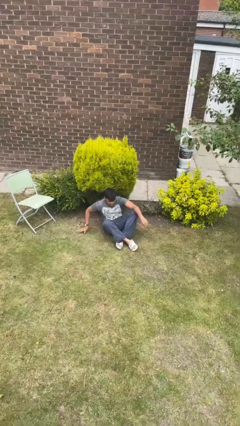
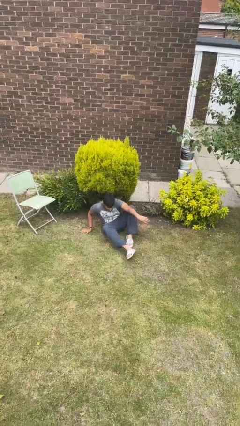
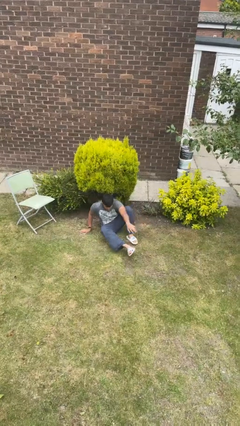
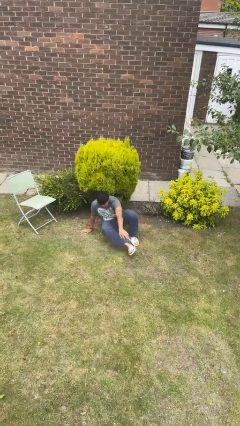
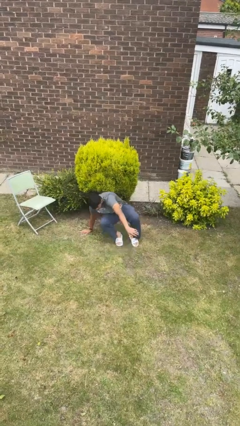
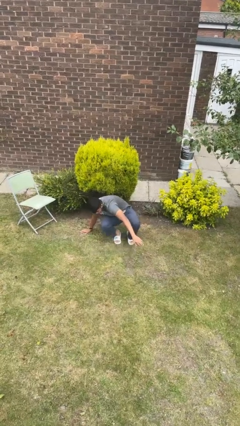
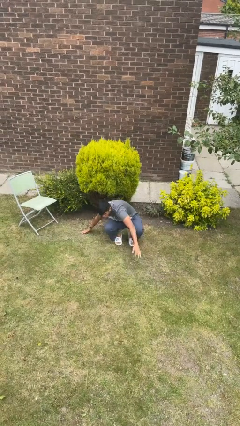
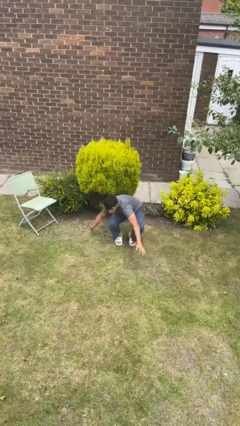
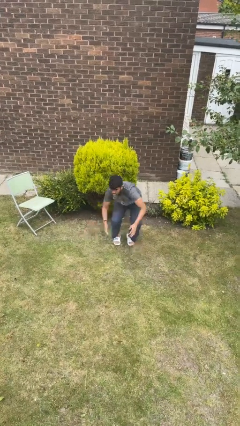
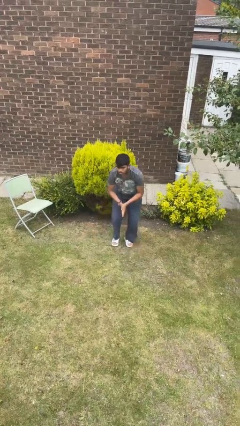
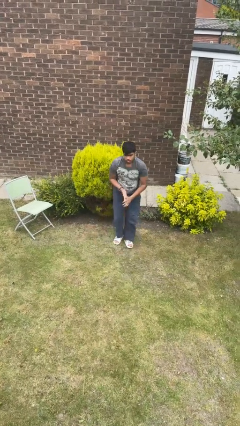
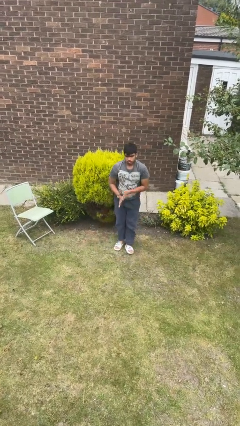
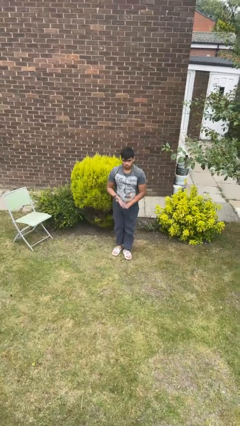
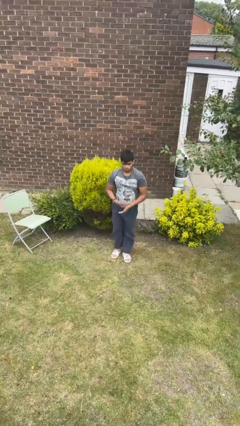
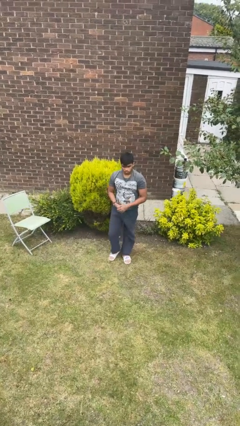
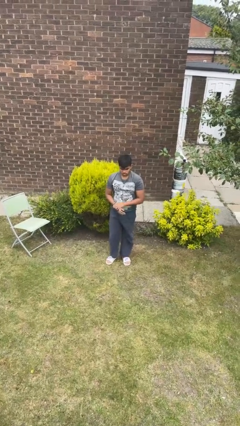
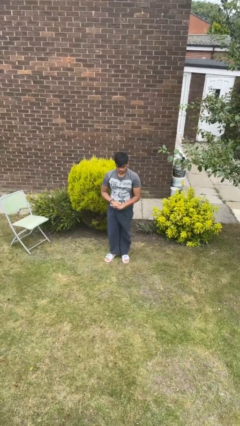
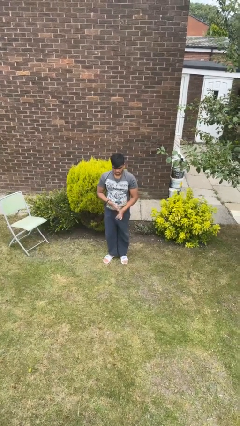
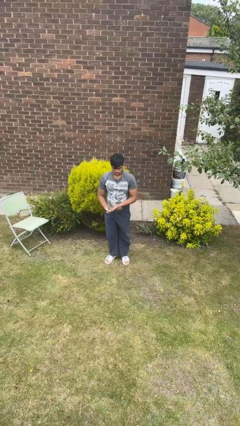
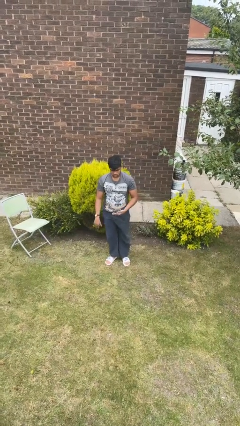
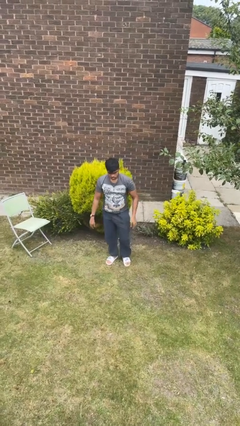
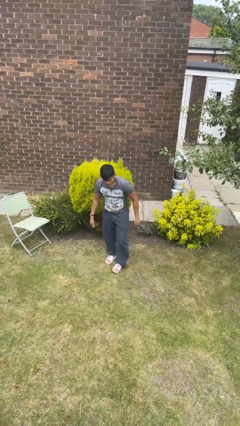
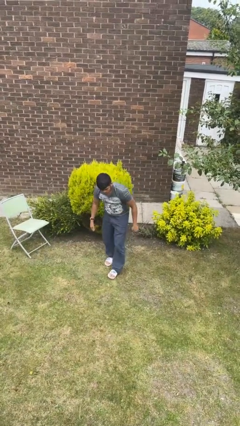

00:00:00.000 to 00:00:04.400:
person stands up from floor

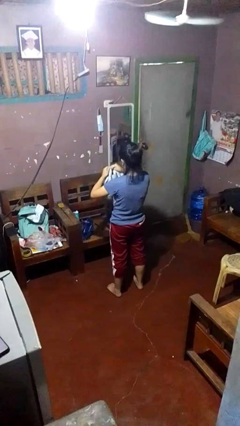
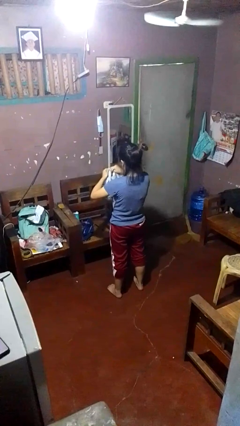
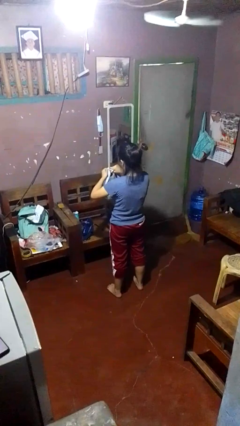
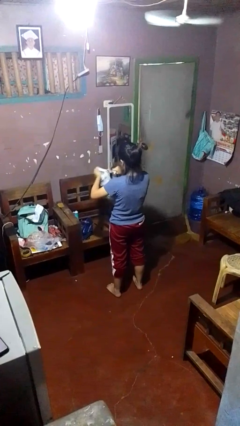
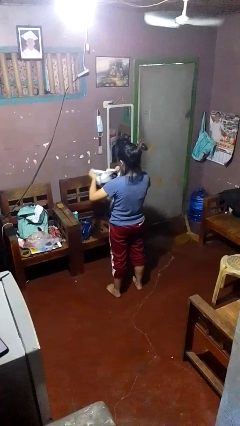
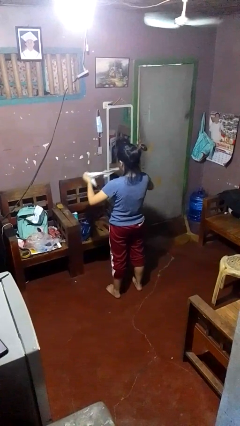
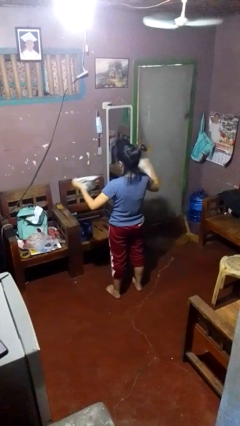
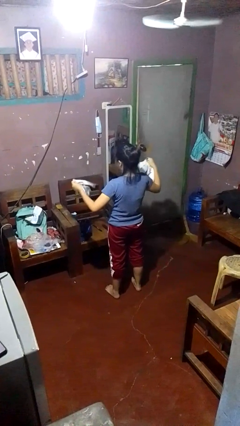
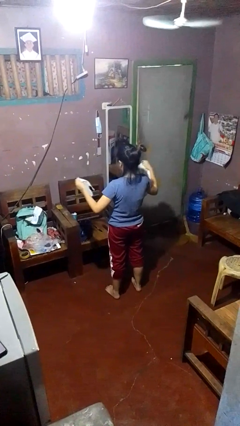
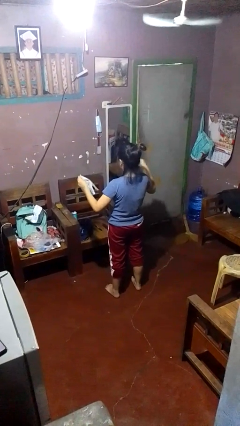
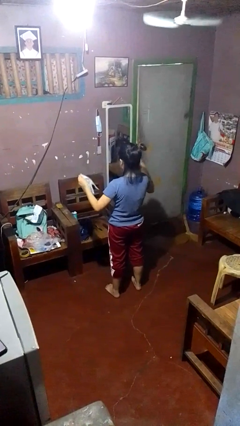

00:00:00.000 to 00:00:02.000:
person tears paper

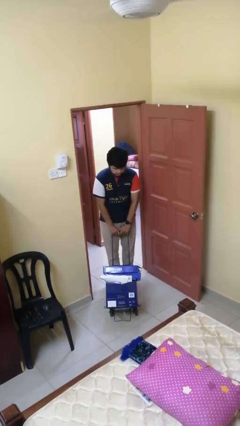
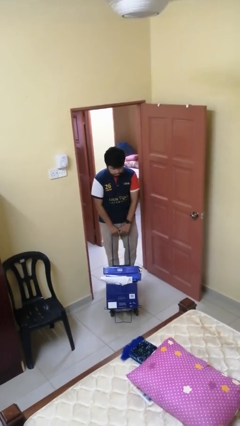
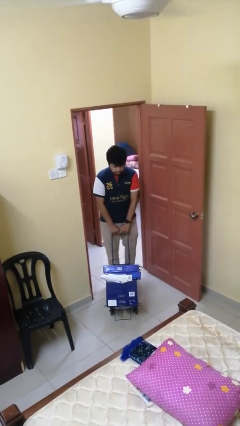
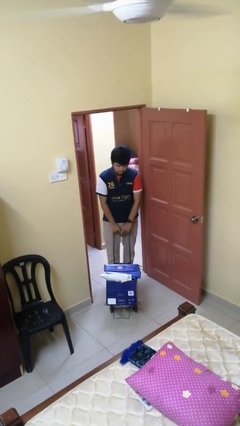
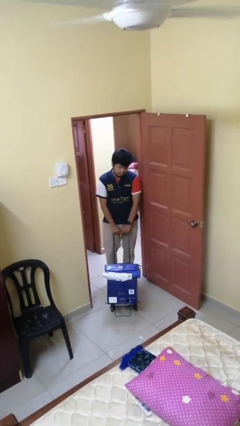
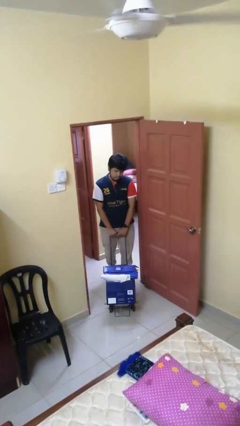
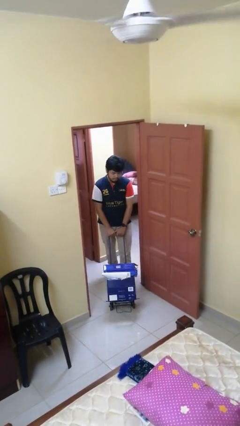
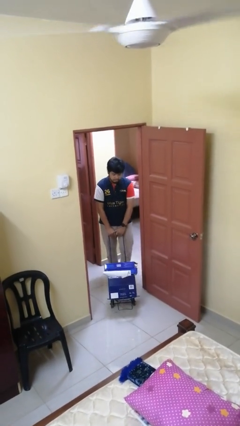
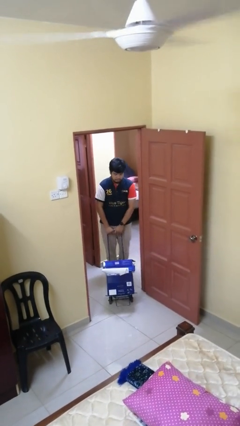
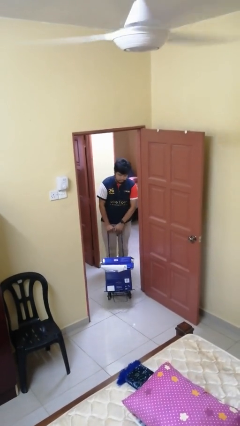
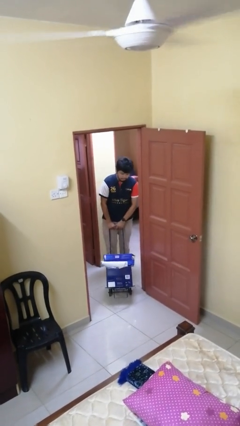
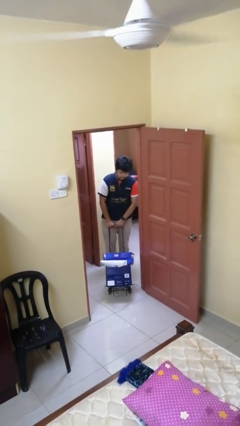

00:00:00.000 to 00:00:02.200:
person pulls wheeled cart

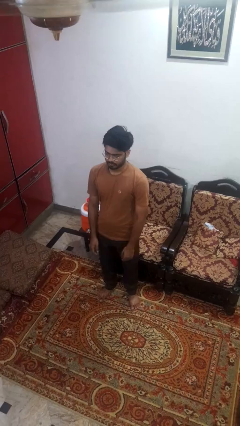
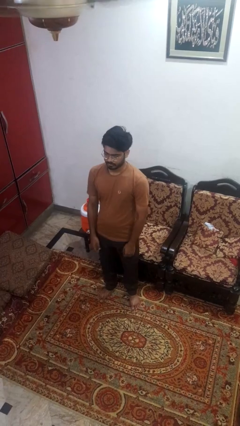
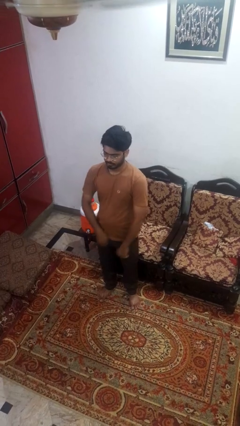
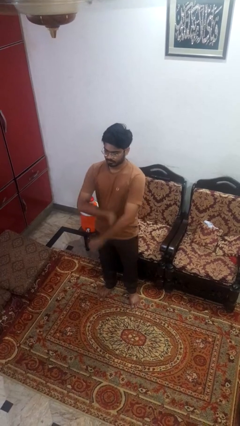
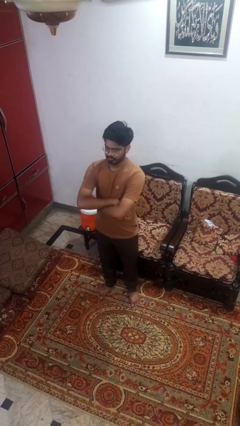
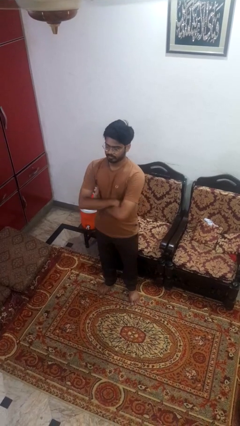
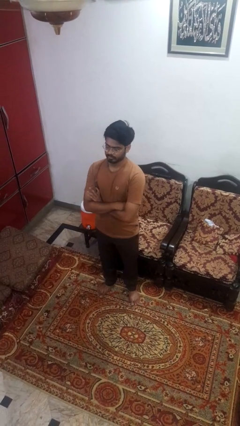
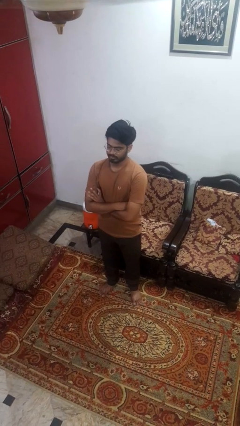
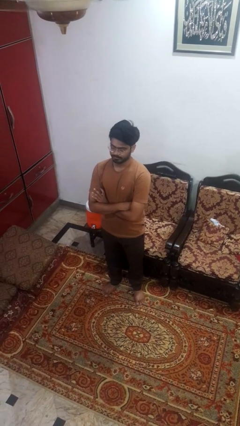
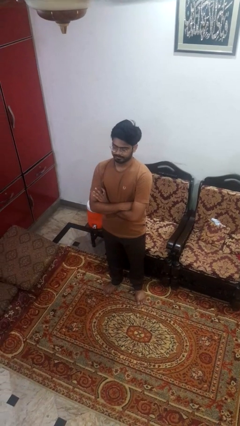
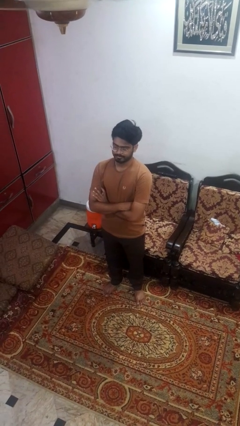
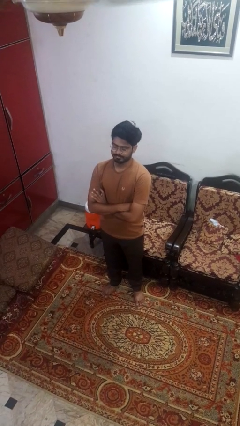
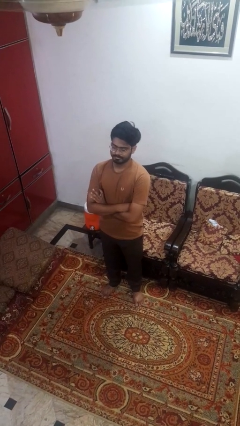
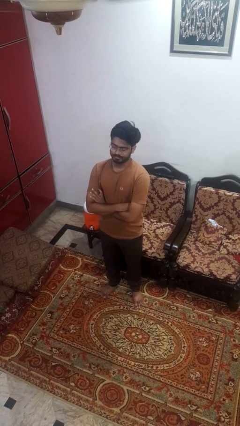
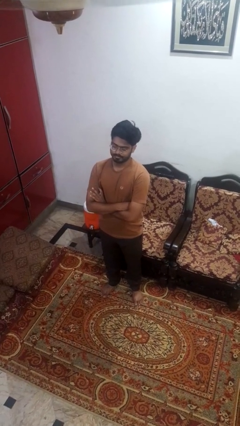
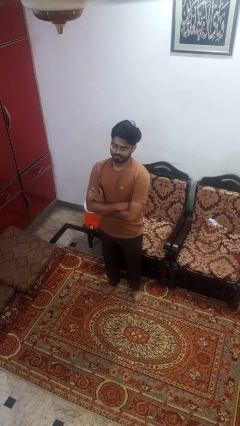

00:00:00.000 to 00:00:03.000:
person crosses arms

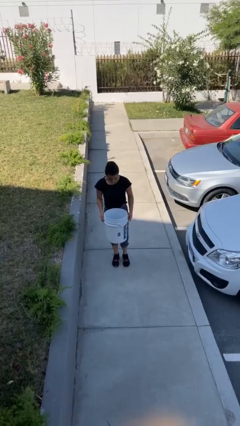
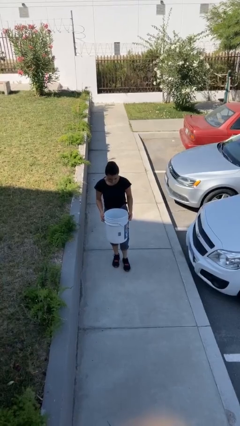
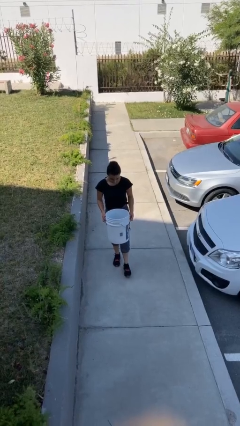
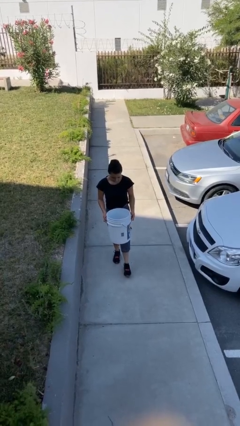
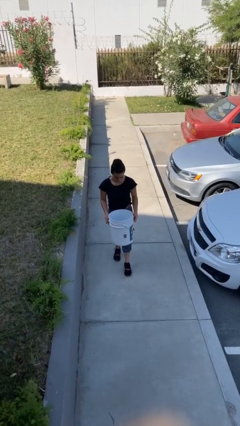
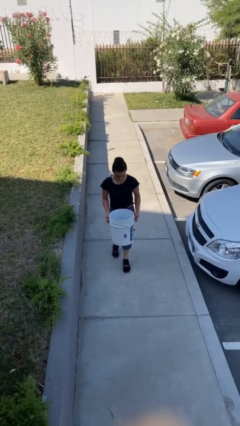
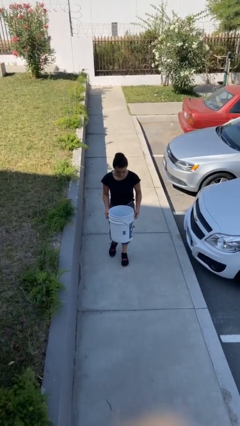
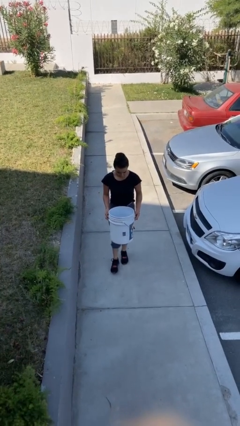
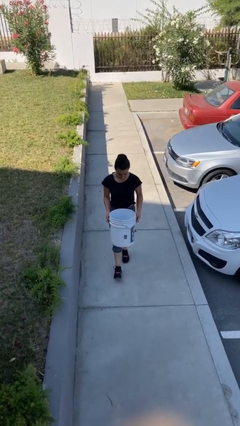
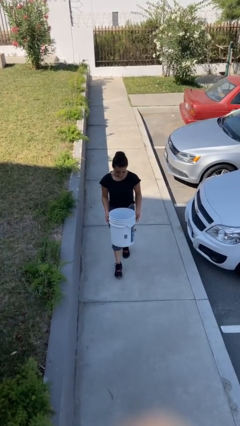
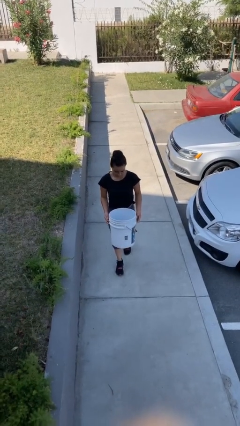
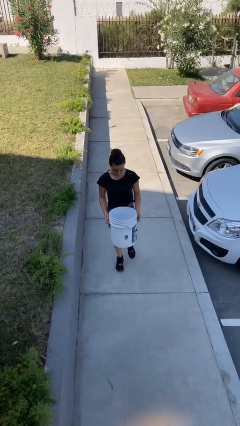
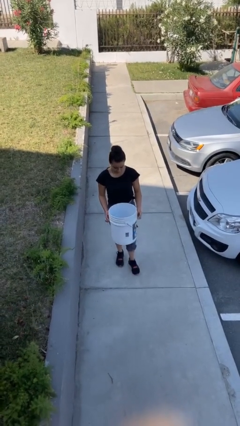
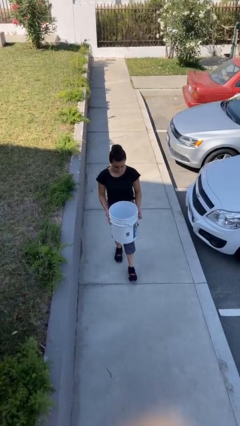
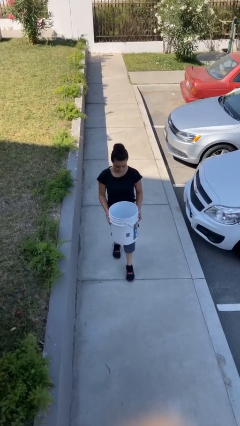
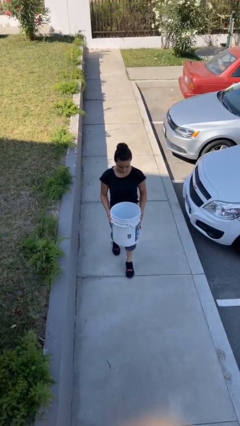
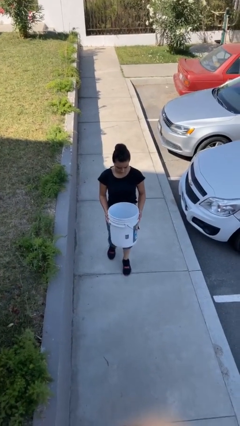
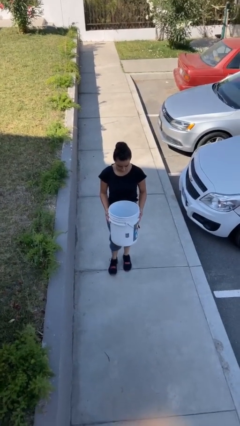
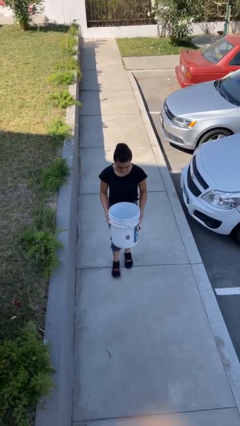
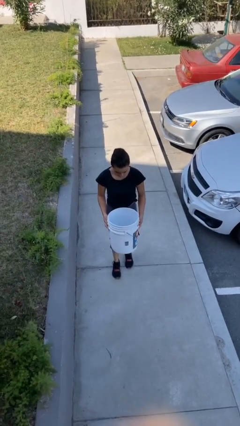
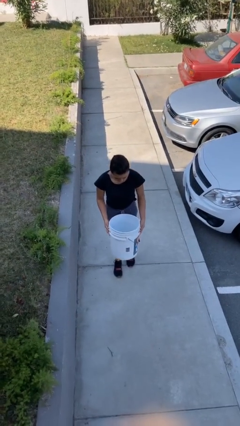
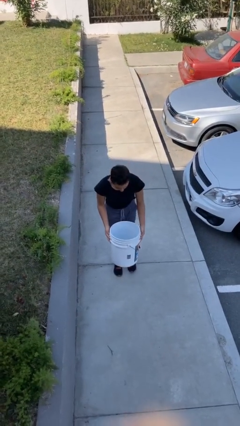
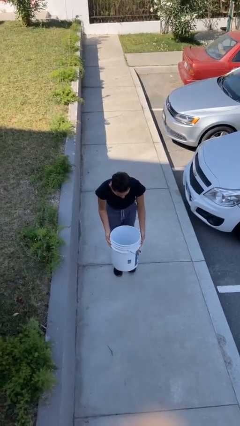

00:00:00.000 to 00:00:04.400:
person carries heavy object

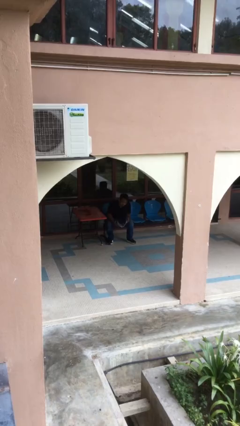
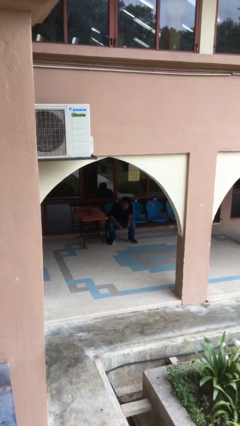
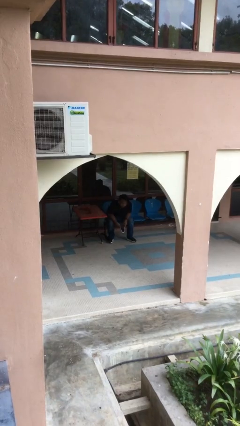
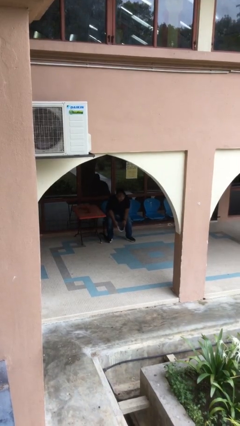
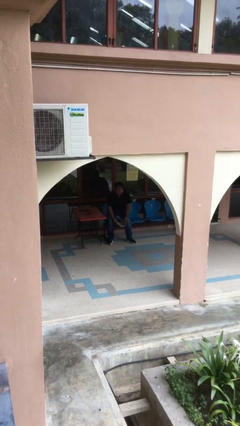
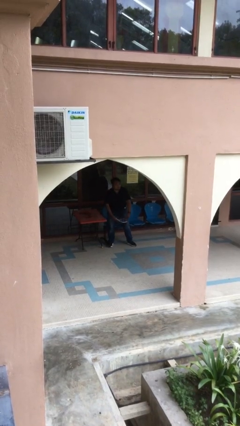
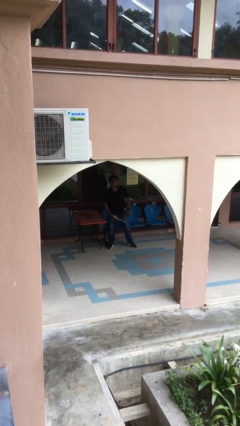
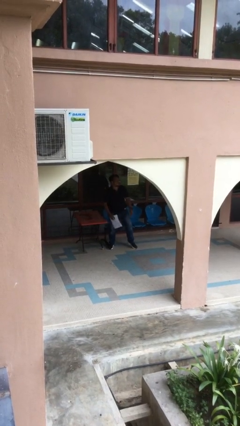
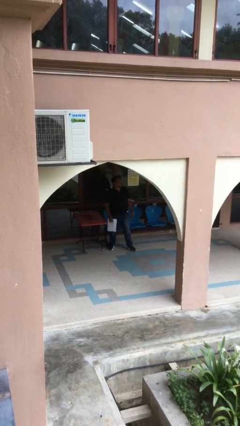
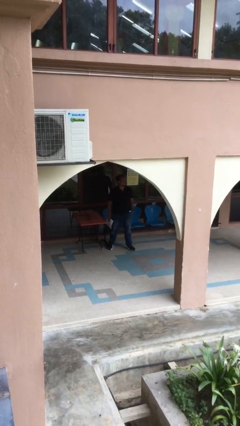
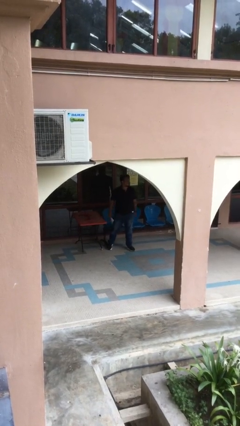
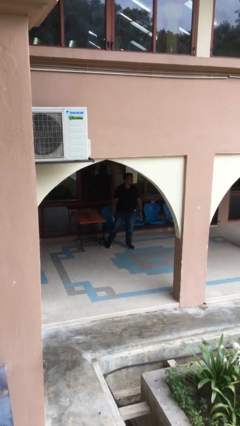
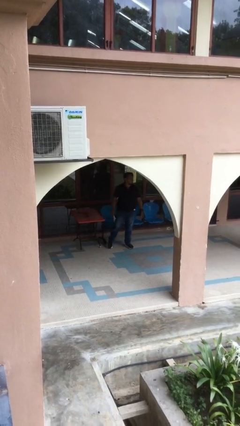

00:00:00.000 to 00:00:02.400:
person stands up
